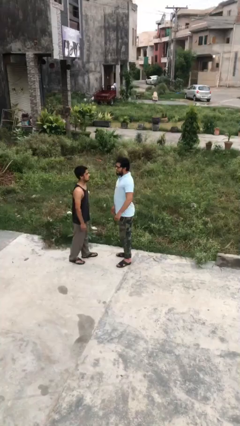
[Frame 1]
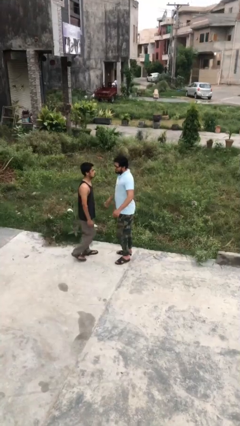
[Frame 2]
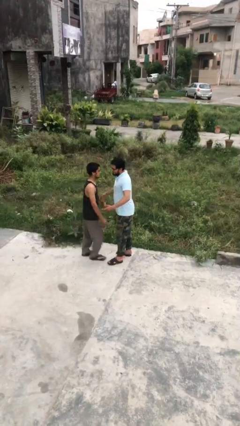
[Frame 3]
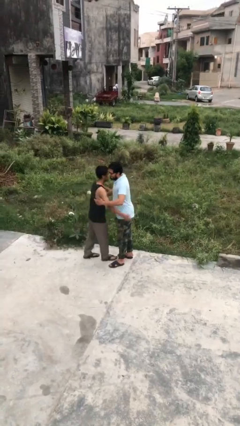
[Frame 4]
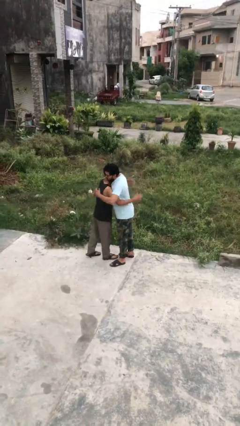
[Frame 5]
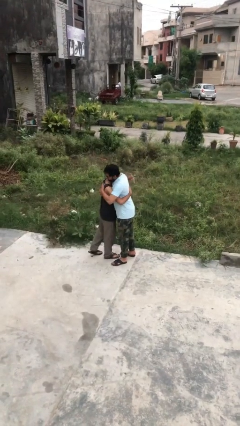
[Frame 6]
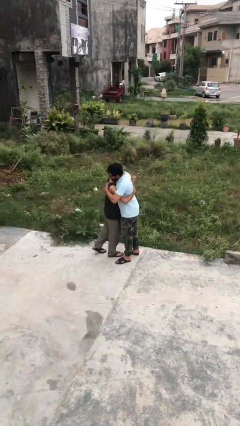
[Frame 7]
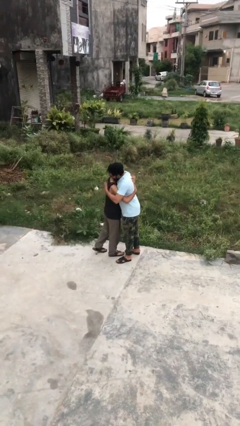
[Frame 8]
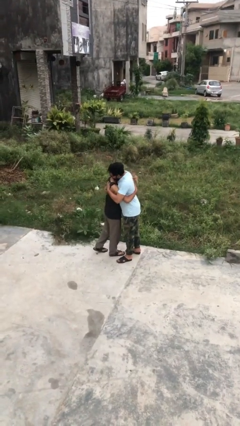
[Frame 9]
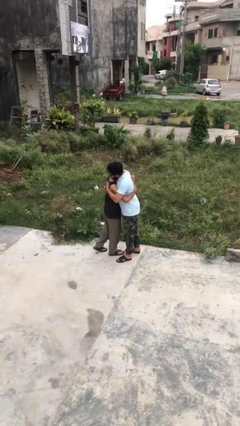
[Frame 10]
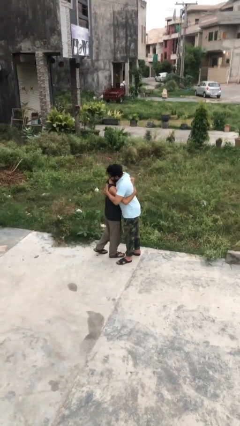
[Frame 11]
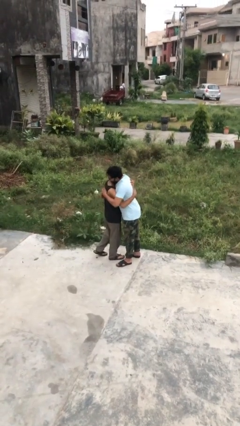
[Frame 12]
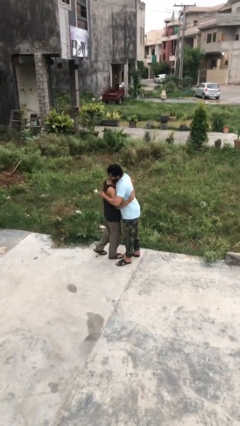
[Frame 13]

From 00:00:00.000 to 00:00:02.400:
person embraces person

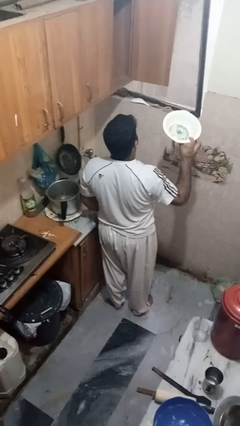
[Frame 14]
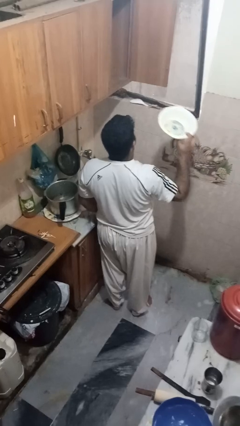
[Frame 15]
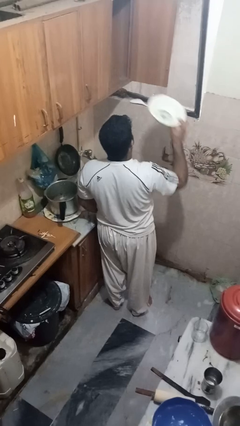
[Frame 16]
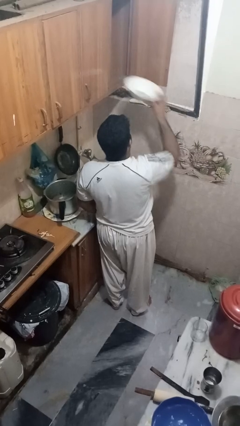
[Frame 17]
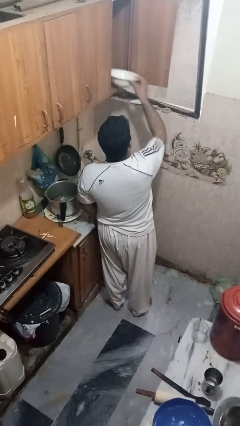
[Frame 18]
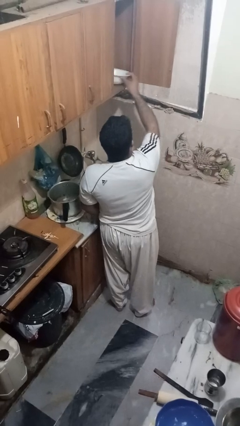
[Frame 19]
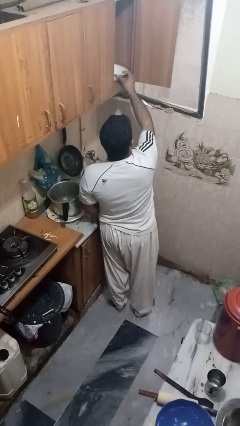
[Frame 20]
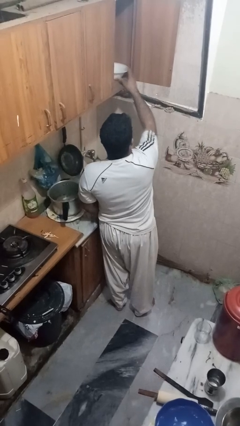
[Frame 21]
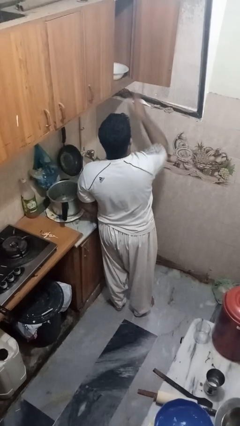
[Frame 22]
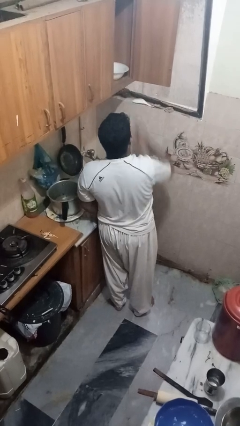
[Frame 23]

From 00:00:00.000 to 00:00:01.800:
person puts object in cabinet

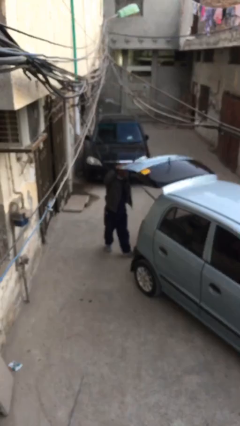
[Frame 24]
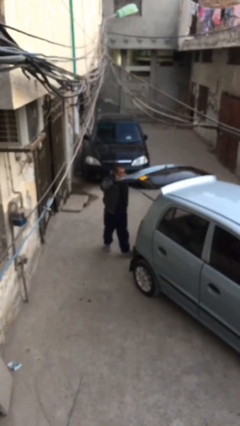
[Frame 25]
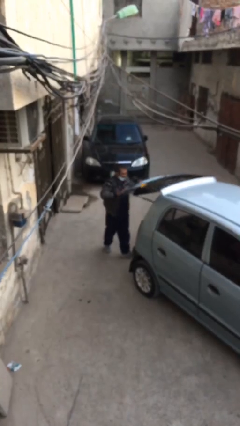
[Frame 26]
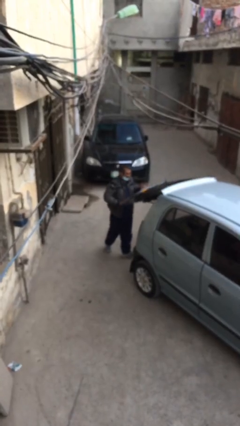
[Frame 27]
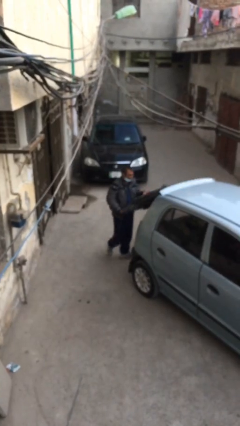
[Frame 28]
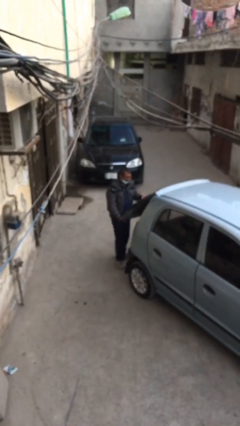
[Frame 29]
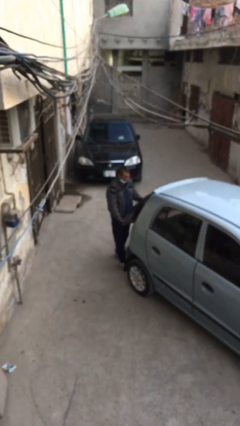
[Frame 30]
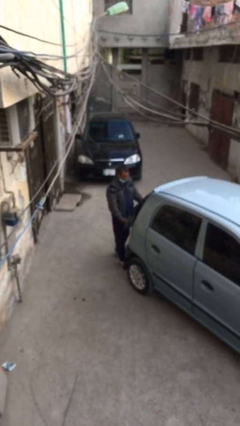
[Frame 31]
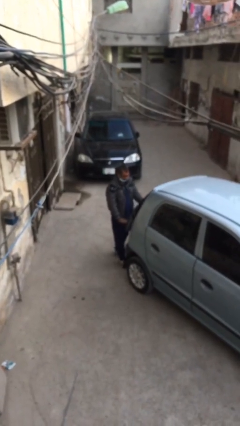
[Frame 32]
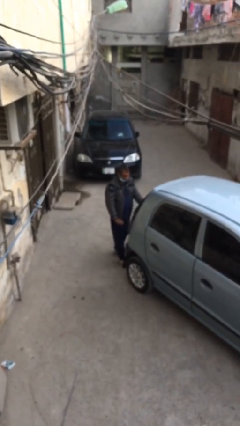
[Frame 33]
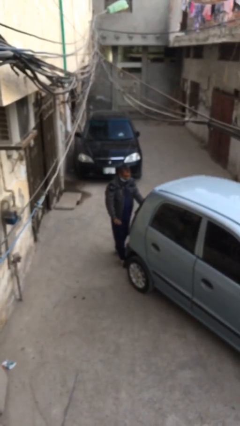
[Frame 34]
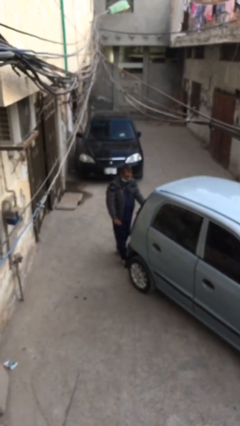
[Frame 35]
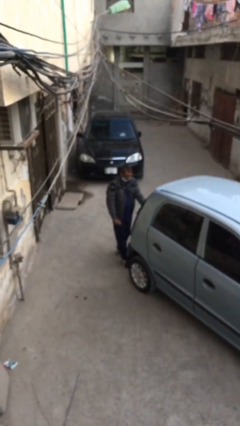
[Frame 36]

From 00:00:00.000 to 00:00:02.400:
person closes car trunk

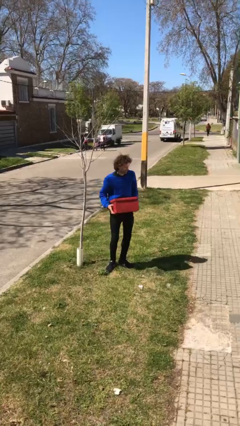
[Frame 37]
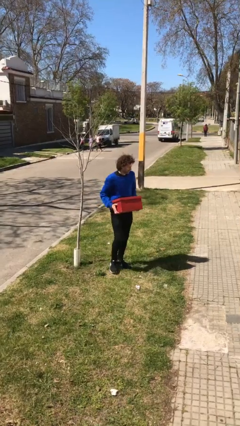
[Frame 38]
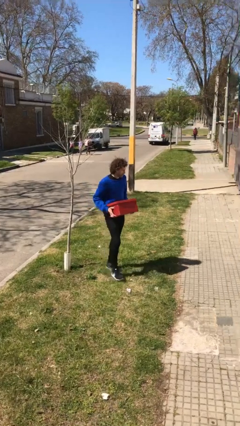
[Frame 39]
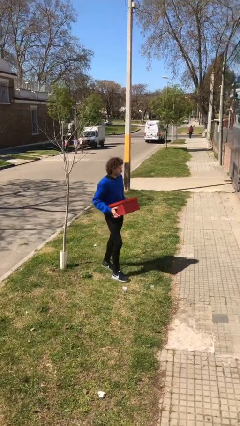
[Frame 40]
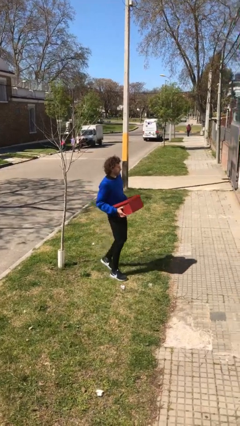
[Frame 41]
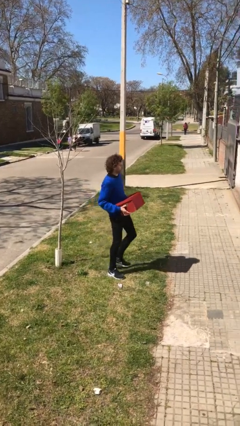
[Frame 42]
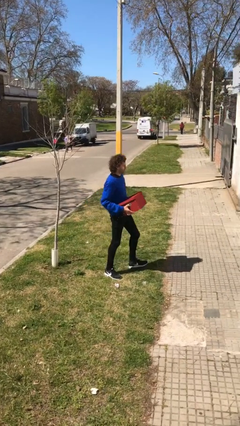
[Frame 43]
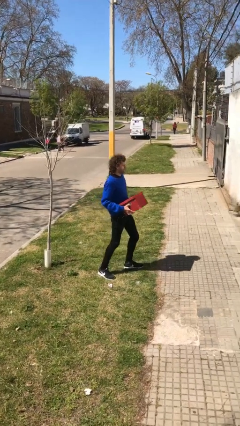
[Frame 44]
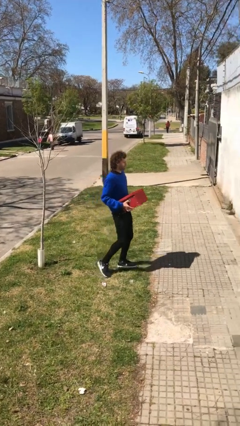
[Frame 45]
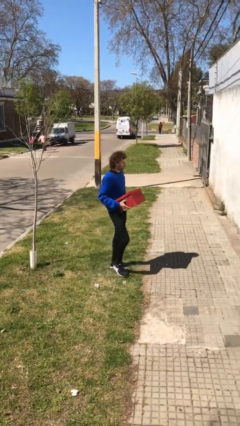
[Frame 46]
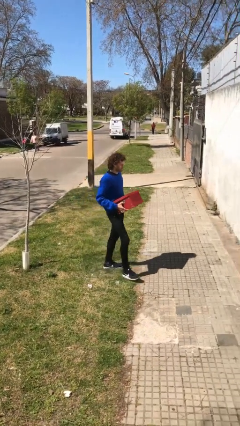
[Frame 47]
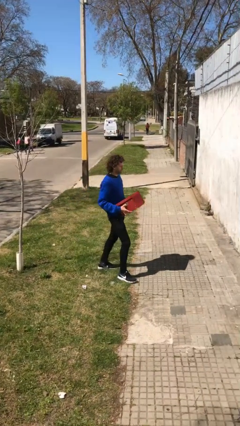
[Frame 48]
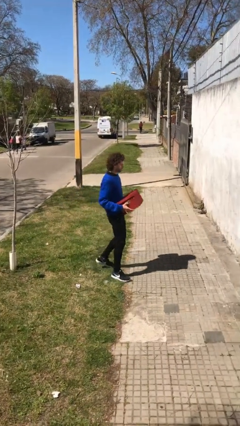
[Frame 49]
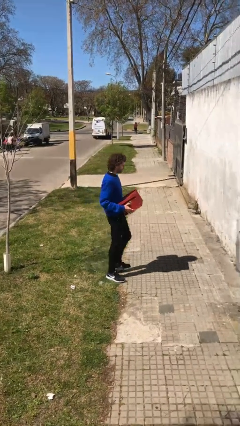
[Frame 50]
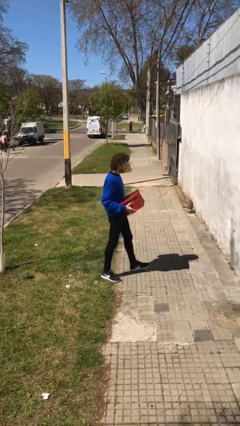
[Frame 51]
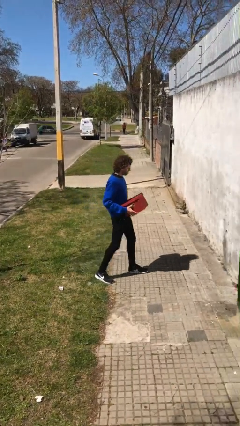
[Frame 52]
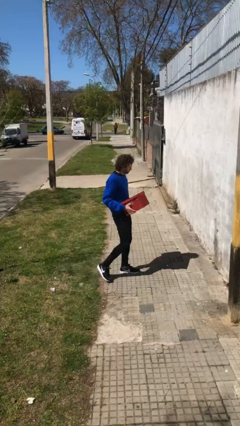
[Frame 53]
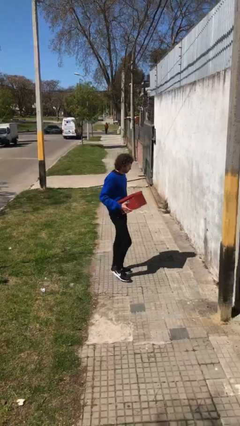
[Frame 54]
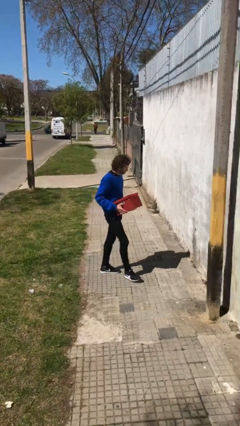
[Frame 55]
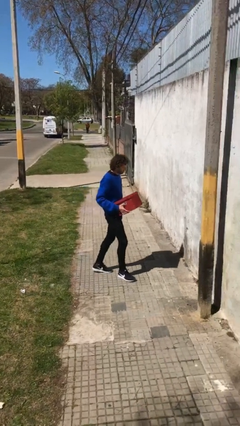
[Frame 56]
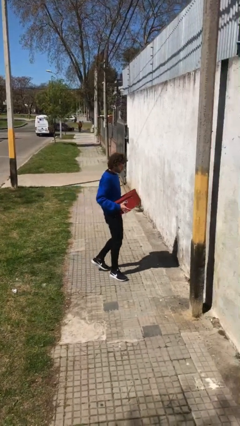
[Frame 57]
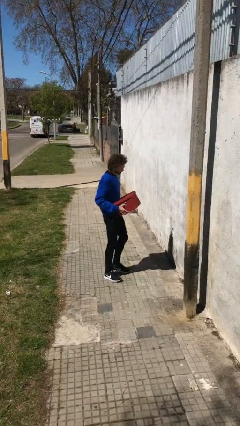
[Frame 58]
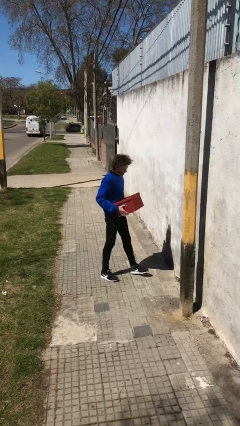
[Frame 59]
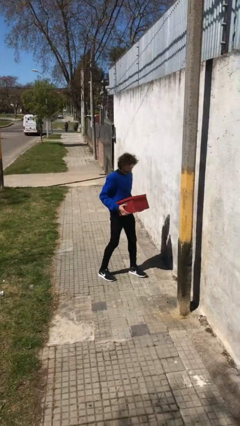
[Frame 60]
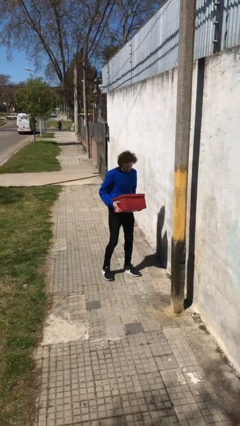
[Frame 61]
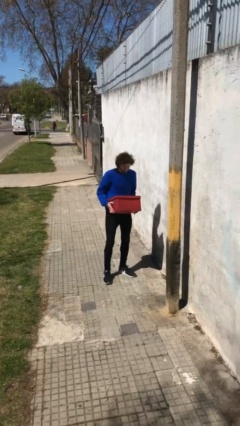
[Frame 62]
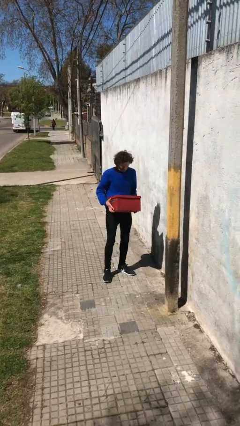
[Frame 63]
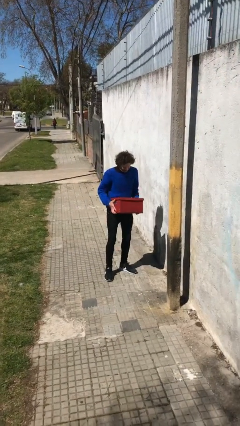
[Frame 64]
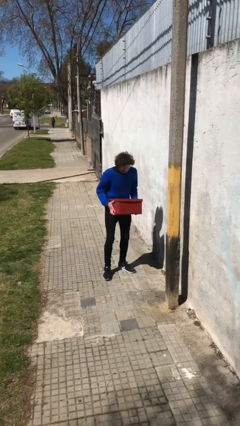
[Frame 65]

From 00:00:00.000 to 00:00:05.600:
person carries heavy object

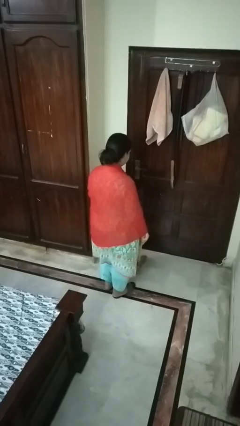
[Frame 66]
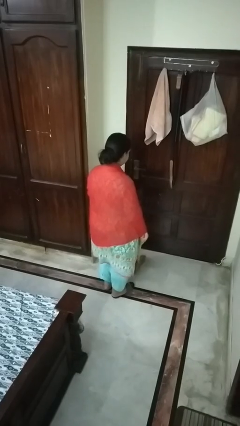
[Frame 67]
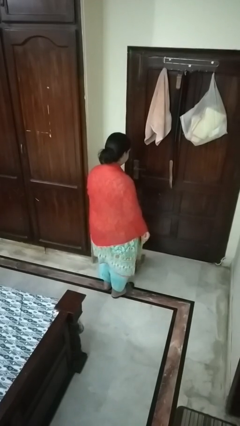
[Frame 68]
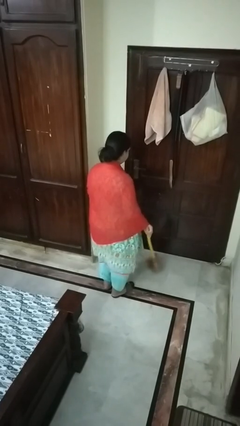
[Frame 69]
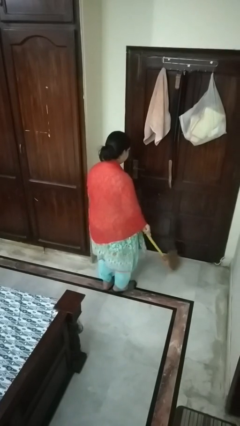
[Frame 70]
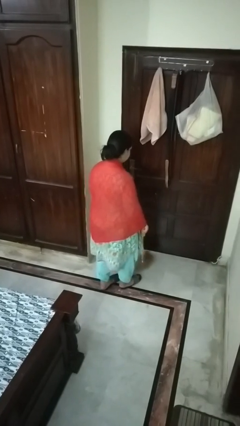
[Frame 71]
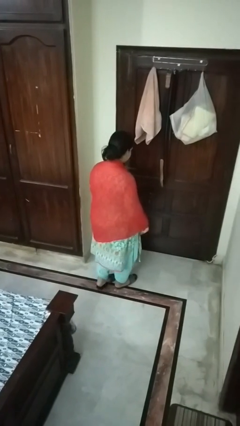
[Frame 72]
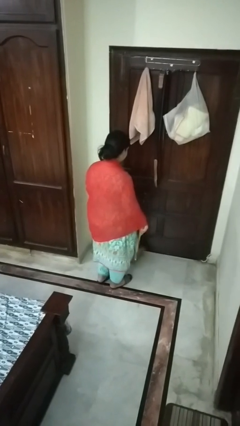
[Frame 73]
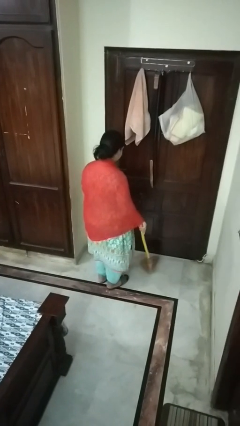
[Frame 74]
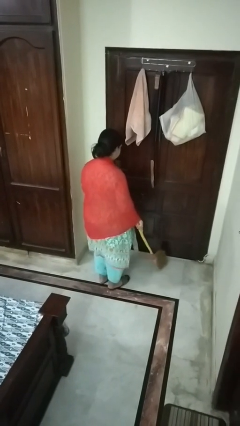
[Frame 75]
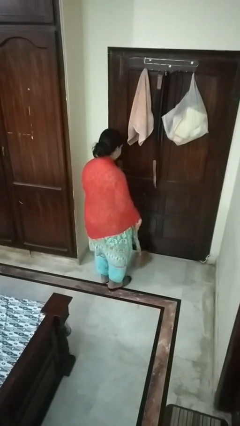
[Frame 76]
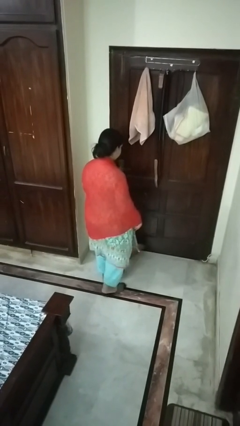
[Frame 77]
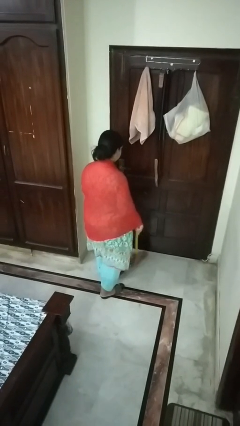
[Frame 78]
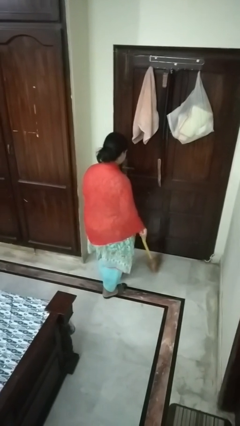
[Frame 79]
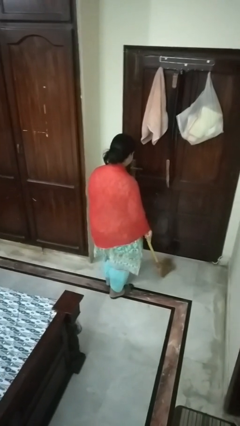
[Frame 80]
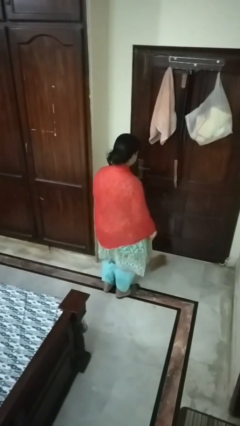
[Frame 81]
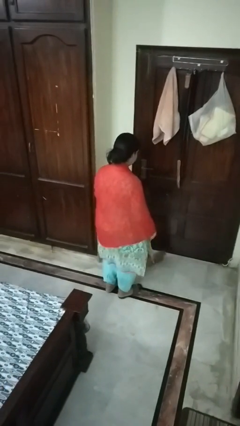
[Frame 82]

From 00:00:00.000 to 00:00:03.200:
person sweeps floor

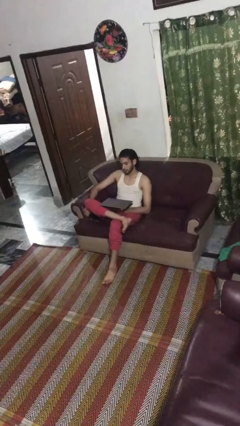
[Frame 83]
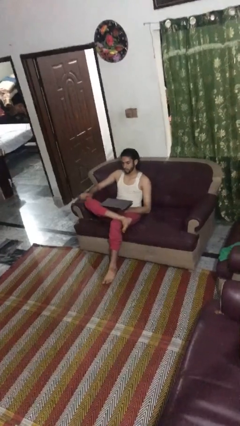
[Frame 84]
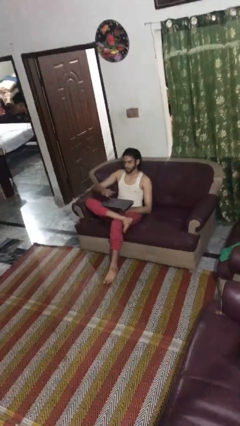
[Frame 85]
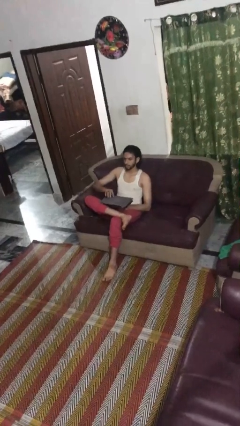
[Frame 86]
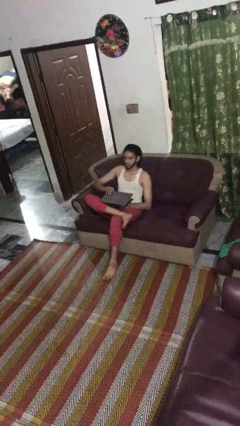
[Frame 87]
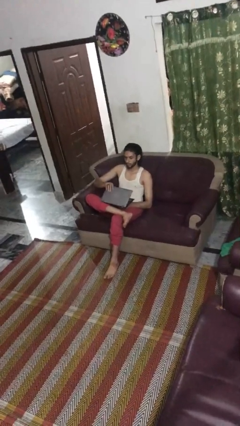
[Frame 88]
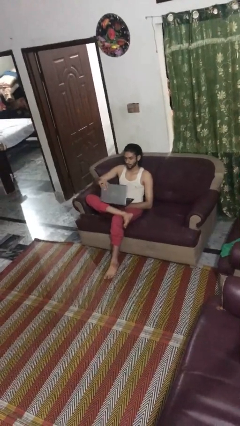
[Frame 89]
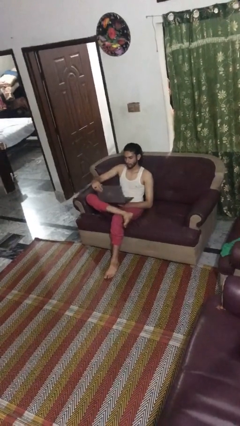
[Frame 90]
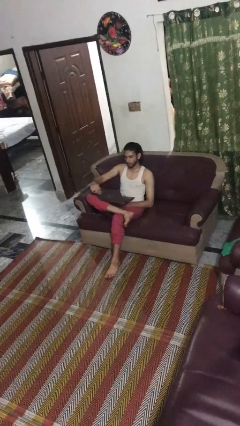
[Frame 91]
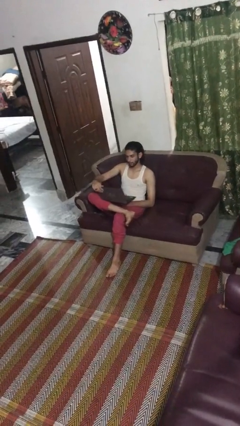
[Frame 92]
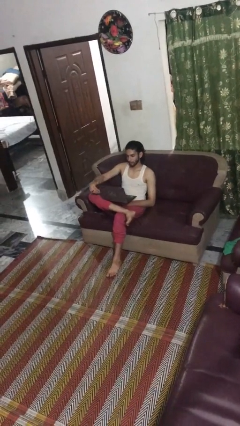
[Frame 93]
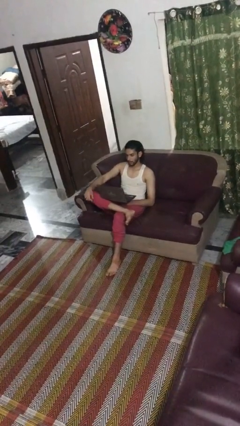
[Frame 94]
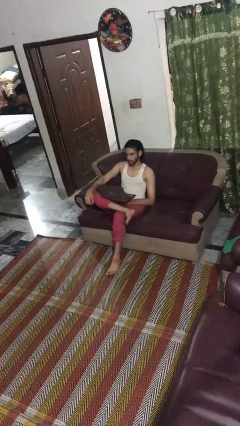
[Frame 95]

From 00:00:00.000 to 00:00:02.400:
person opens laptop
